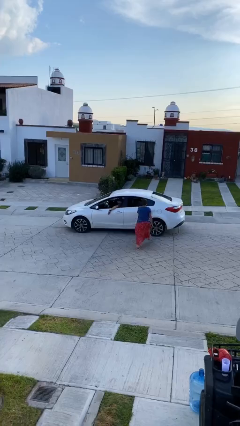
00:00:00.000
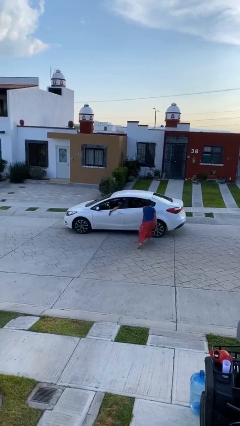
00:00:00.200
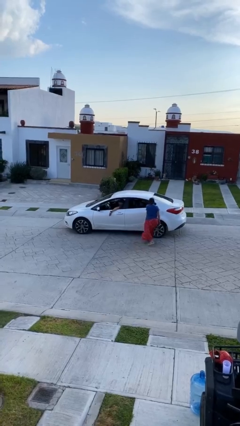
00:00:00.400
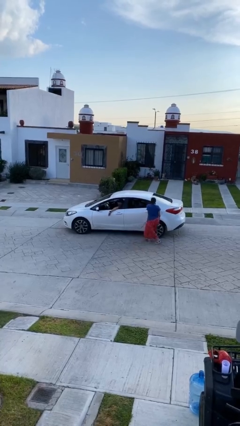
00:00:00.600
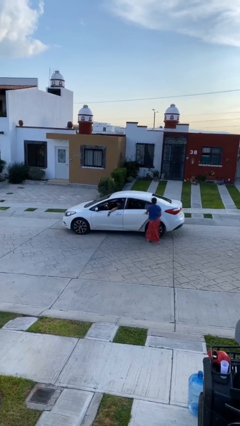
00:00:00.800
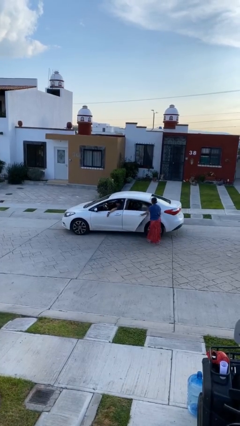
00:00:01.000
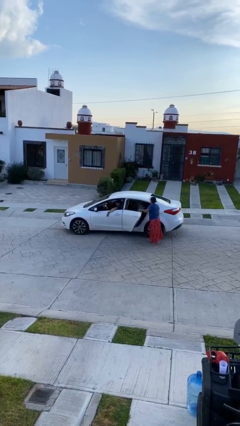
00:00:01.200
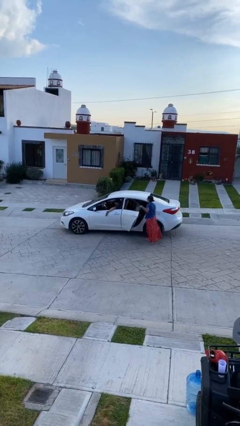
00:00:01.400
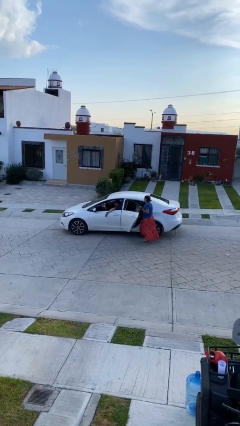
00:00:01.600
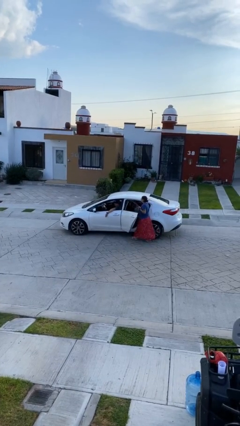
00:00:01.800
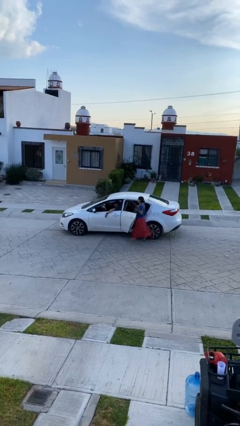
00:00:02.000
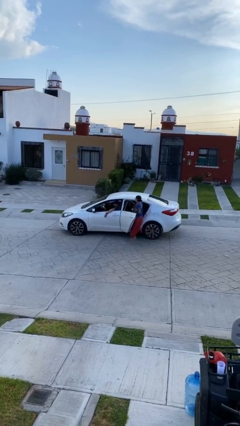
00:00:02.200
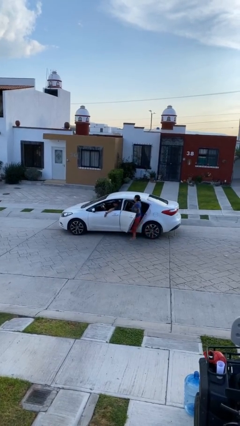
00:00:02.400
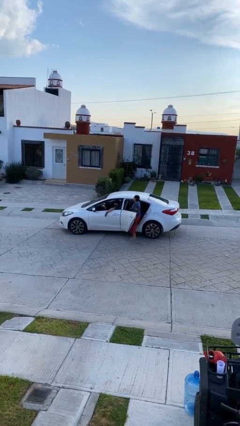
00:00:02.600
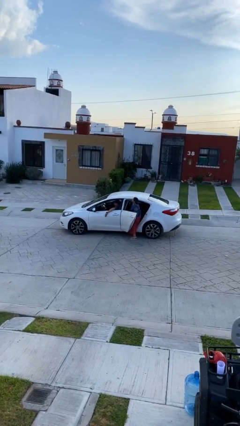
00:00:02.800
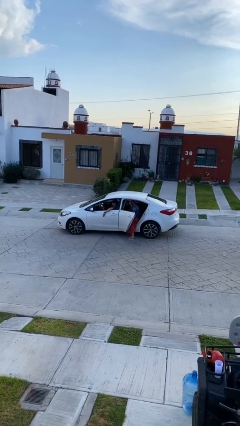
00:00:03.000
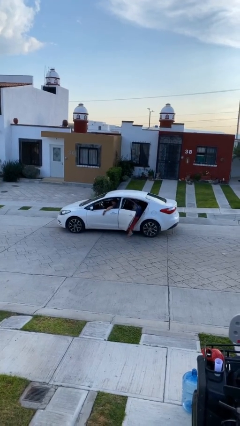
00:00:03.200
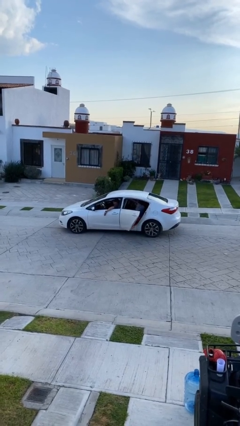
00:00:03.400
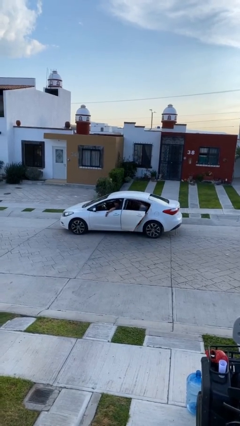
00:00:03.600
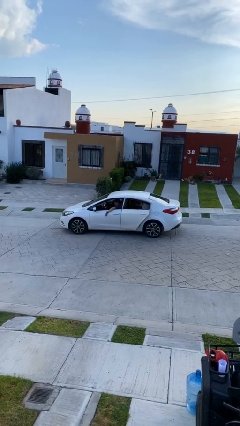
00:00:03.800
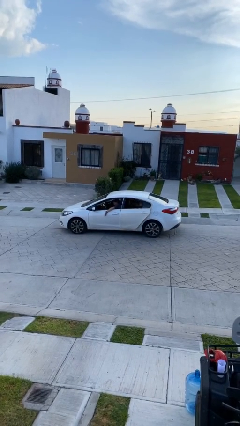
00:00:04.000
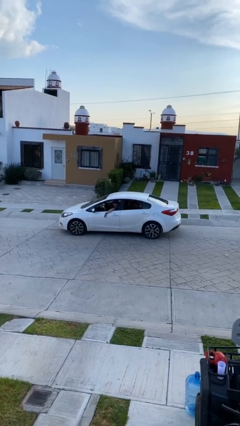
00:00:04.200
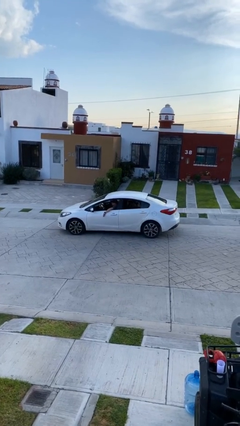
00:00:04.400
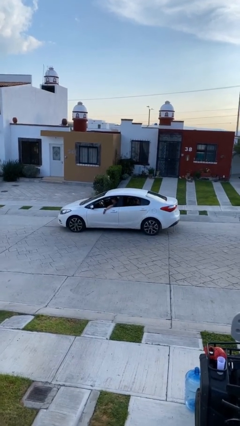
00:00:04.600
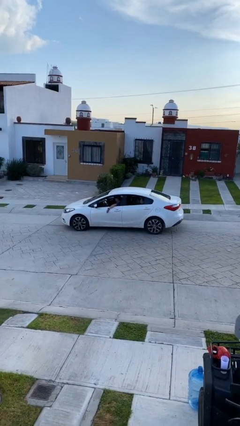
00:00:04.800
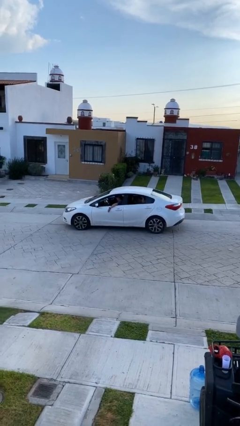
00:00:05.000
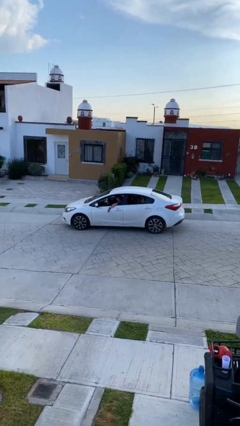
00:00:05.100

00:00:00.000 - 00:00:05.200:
car picks up person

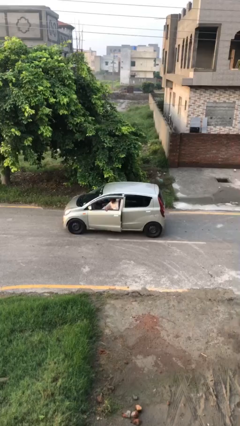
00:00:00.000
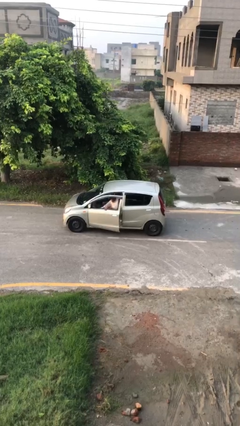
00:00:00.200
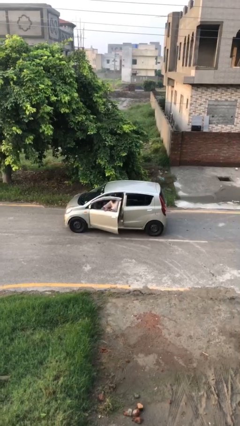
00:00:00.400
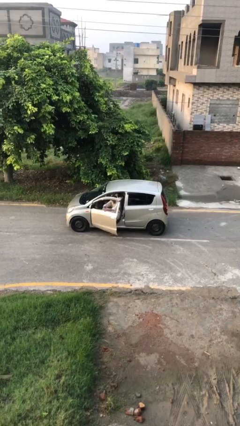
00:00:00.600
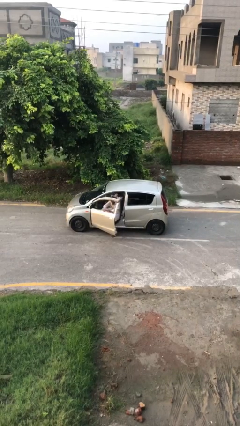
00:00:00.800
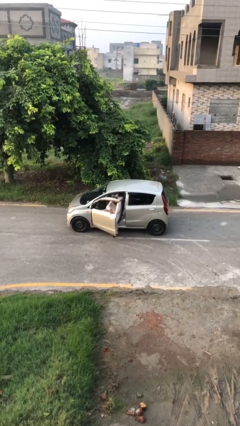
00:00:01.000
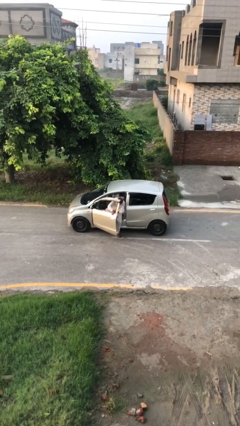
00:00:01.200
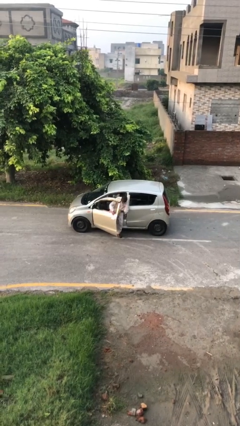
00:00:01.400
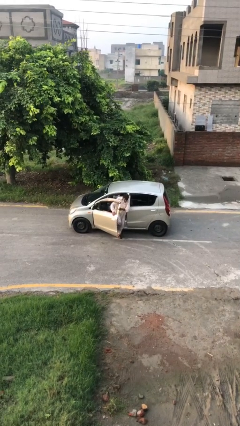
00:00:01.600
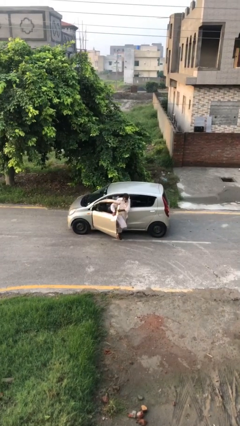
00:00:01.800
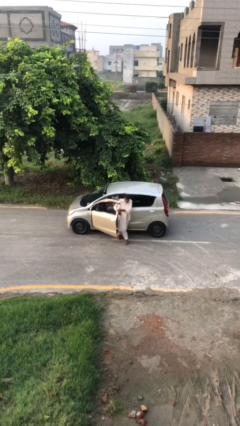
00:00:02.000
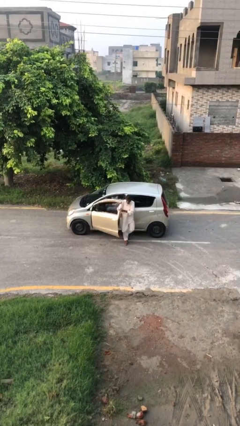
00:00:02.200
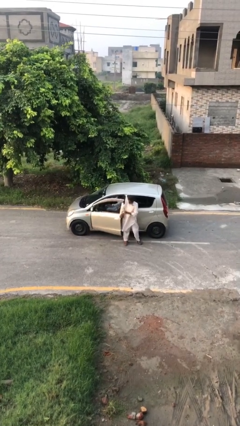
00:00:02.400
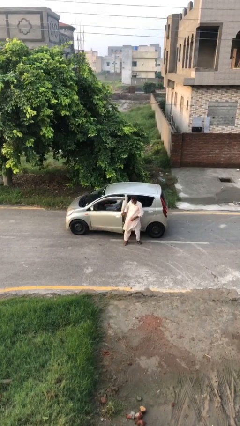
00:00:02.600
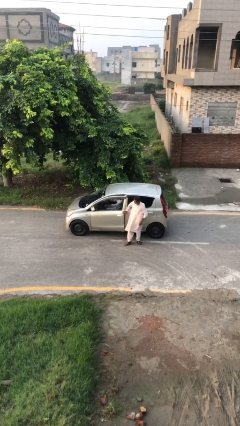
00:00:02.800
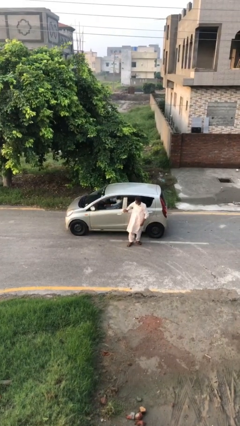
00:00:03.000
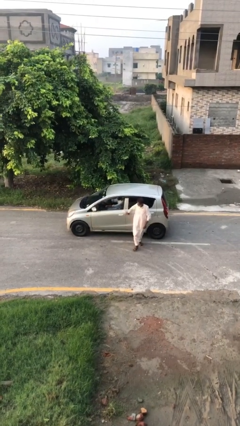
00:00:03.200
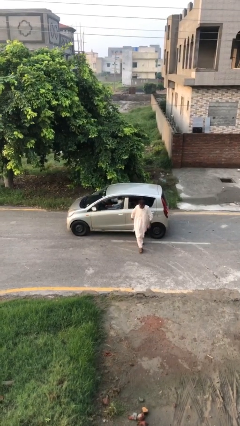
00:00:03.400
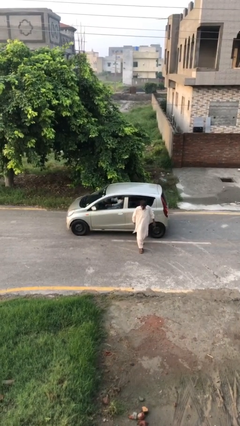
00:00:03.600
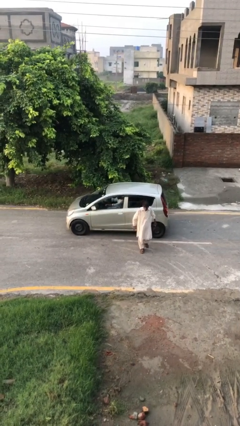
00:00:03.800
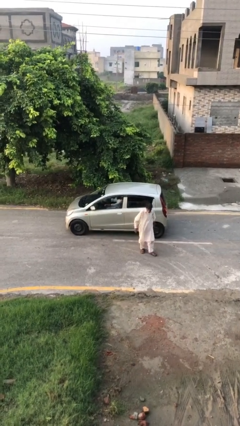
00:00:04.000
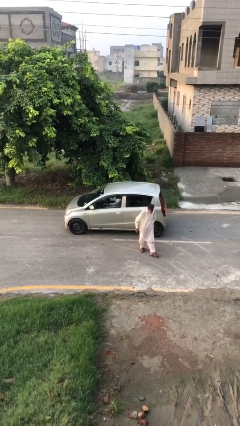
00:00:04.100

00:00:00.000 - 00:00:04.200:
car drops off person

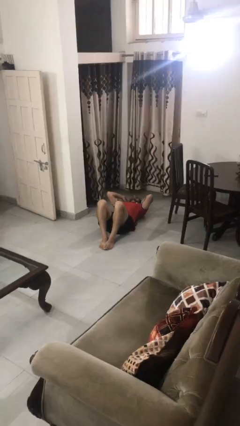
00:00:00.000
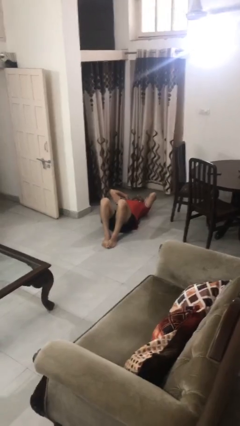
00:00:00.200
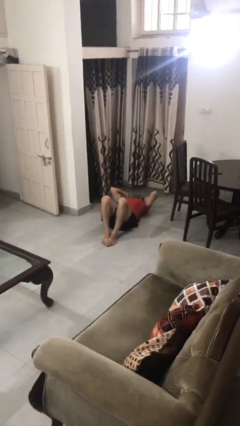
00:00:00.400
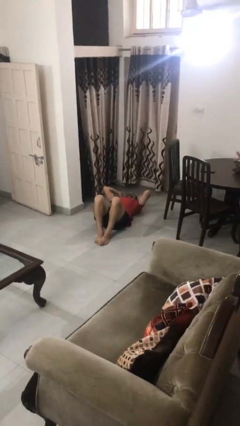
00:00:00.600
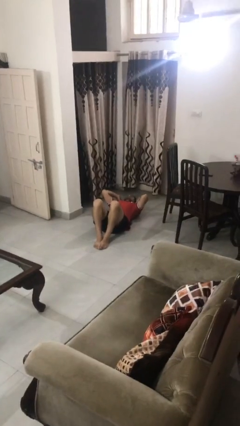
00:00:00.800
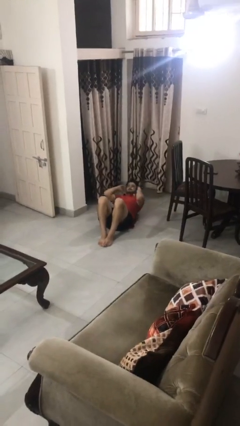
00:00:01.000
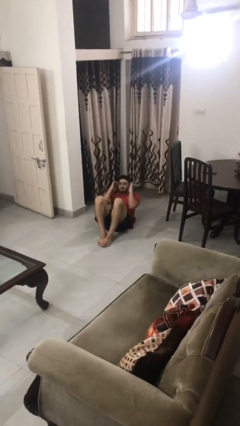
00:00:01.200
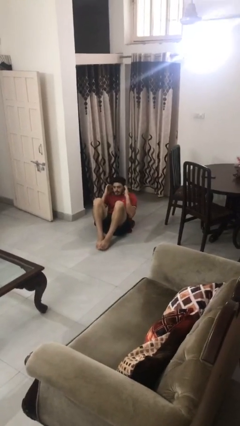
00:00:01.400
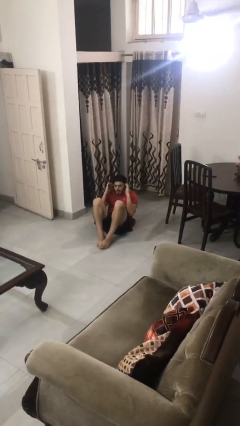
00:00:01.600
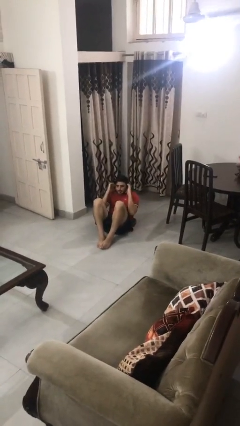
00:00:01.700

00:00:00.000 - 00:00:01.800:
person exercises with situp

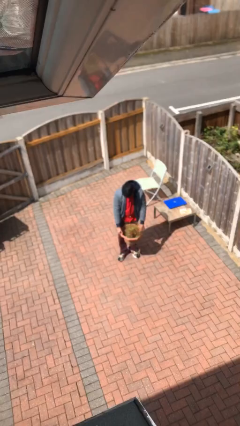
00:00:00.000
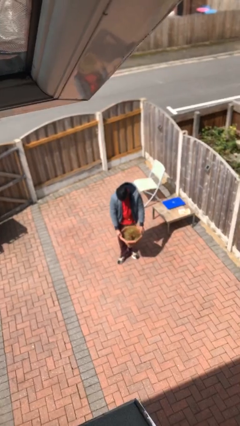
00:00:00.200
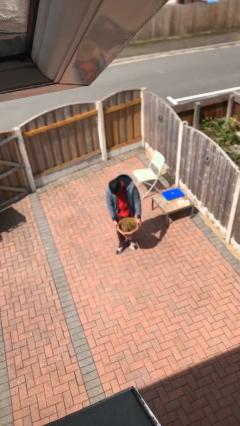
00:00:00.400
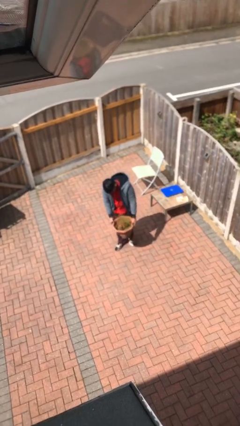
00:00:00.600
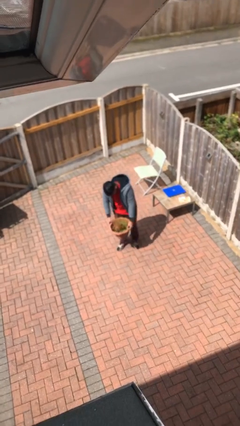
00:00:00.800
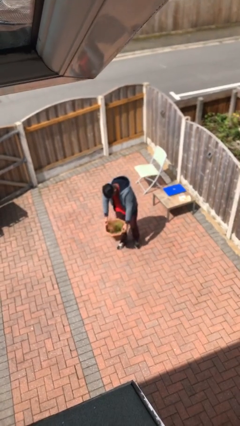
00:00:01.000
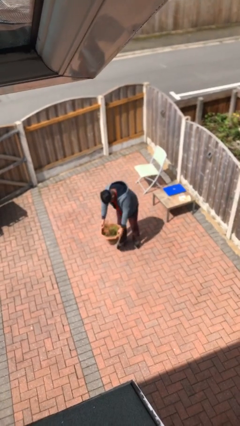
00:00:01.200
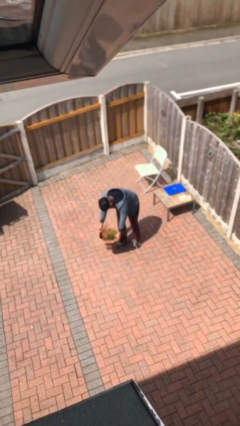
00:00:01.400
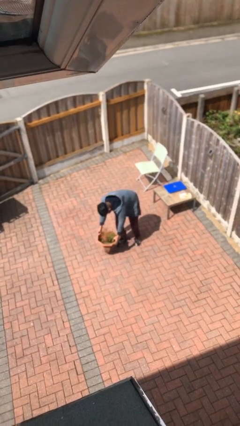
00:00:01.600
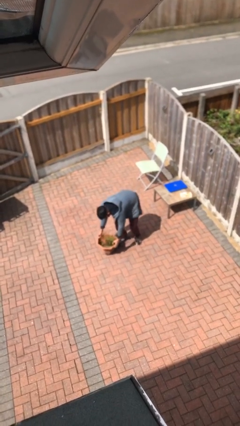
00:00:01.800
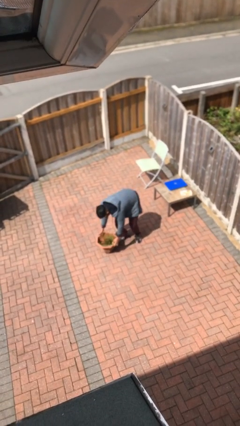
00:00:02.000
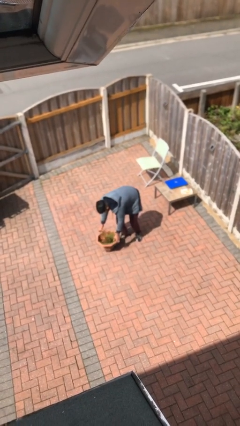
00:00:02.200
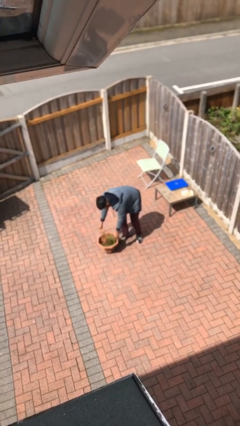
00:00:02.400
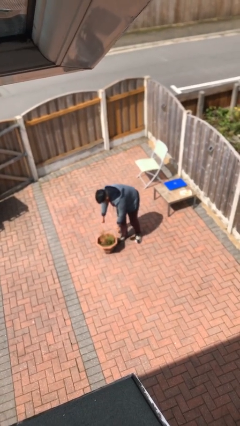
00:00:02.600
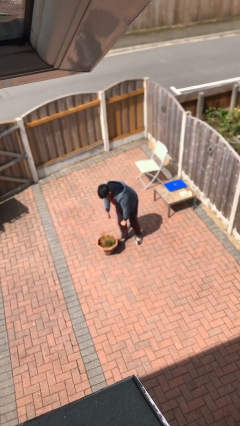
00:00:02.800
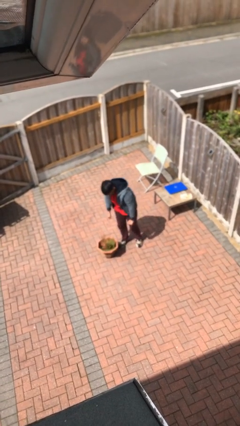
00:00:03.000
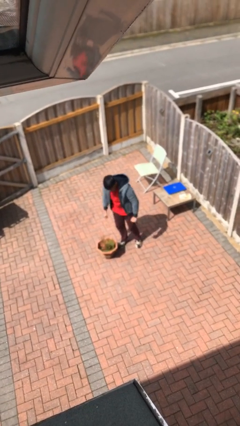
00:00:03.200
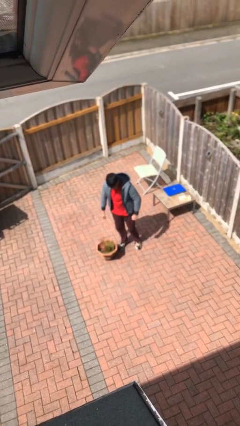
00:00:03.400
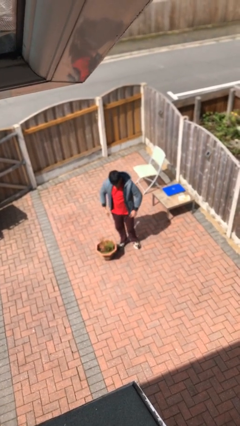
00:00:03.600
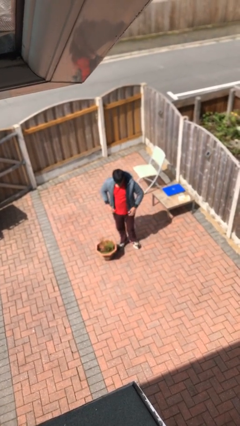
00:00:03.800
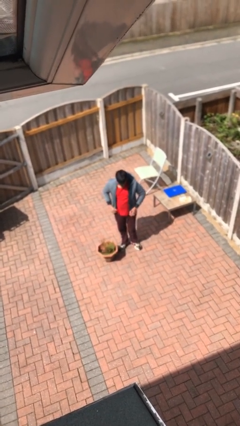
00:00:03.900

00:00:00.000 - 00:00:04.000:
person puts down object on floor

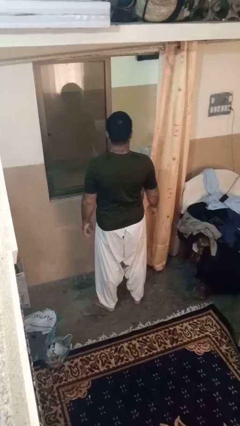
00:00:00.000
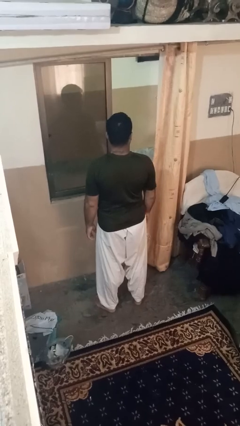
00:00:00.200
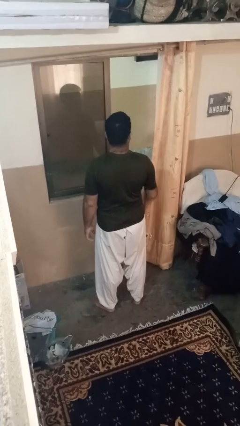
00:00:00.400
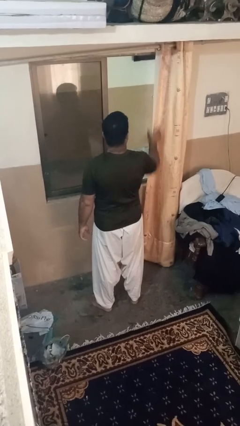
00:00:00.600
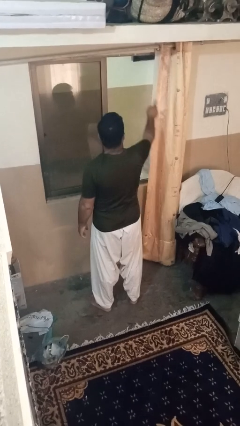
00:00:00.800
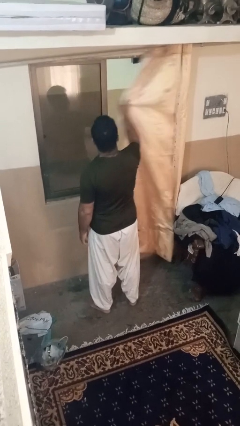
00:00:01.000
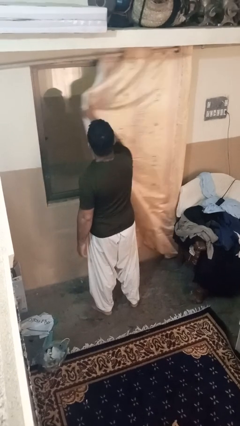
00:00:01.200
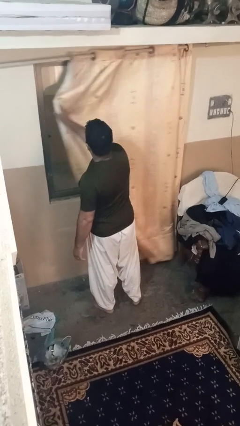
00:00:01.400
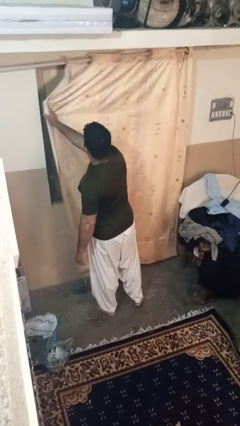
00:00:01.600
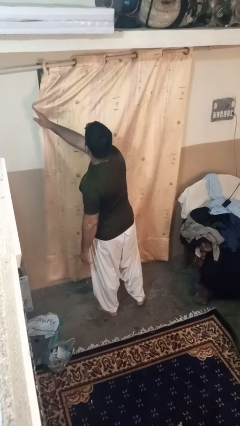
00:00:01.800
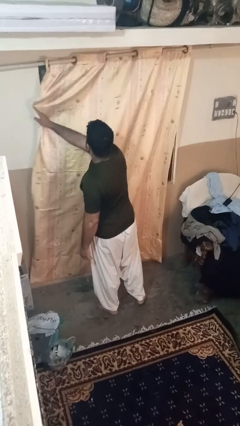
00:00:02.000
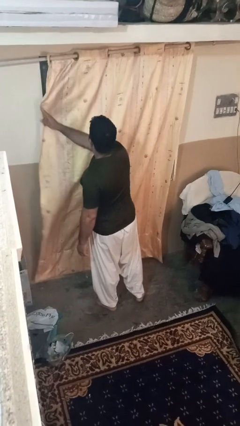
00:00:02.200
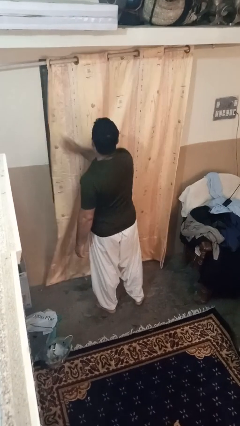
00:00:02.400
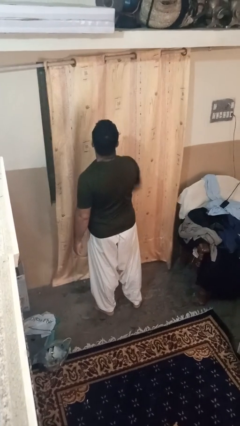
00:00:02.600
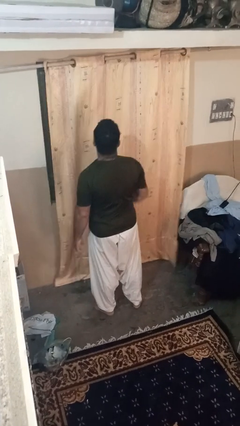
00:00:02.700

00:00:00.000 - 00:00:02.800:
person closes curtains
